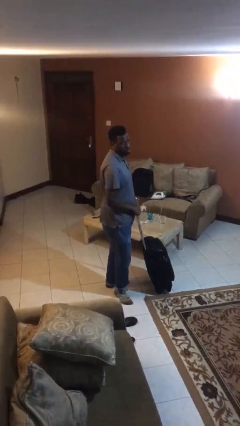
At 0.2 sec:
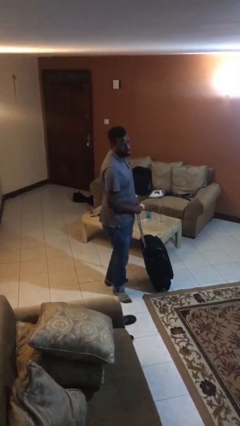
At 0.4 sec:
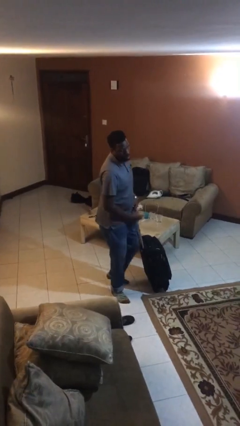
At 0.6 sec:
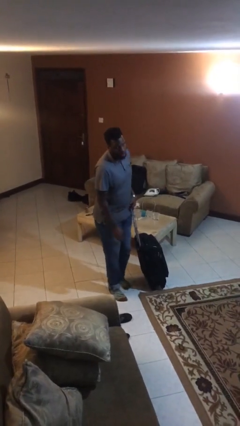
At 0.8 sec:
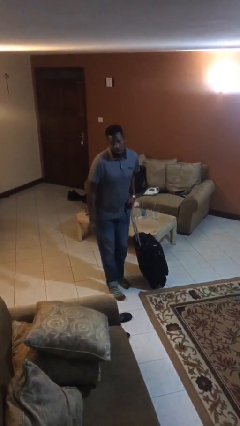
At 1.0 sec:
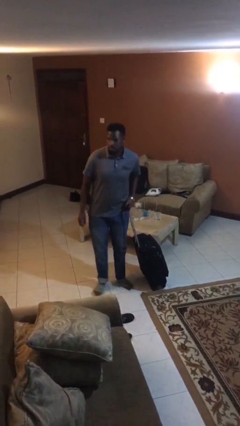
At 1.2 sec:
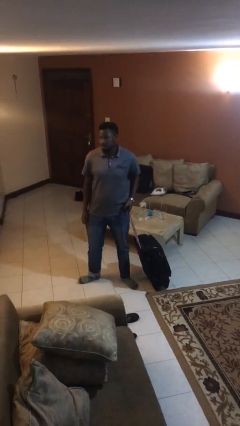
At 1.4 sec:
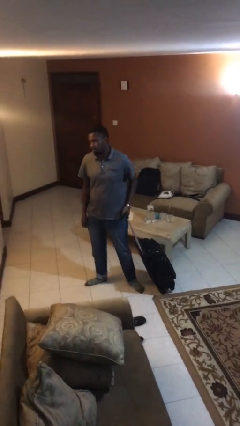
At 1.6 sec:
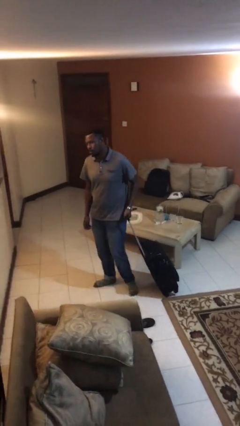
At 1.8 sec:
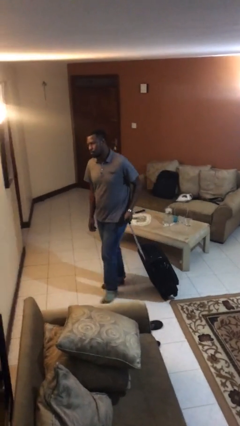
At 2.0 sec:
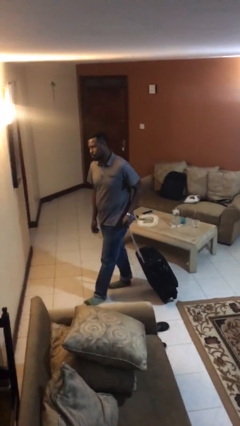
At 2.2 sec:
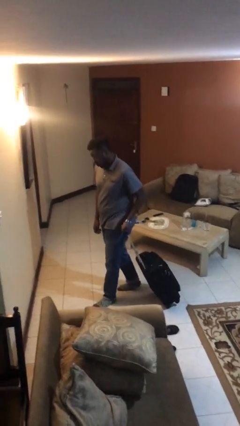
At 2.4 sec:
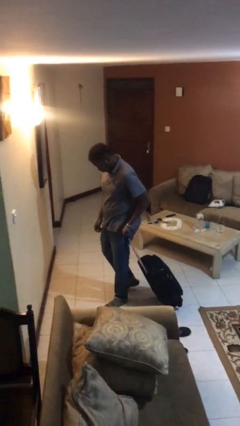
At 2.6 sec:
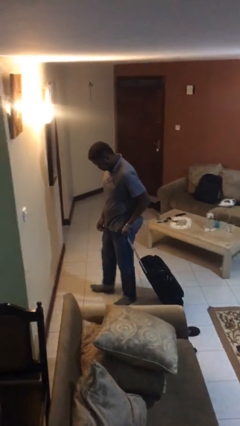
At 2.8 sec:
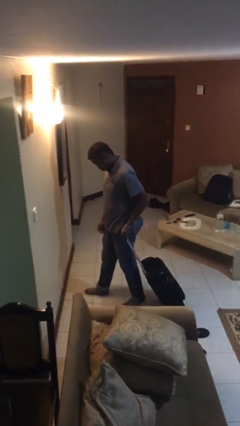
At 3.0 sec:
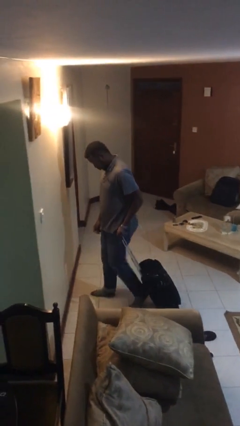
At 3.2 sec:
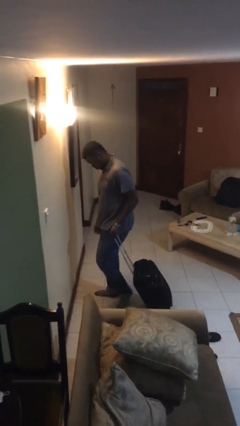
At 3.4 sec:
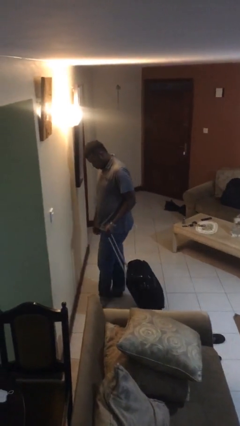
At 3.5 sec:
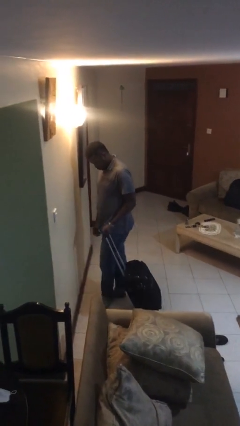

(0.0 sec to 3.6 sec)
person pulls wheeled cart

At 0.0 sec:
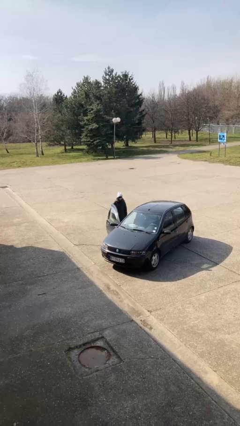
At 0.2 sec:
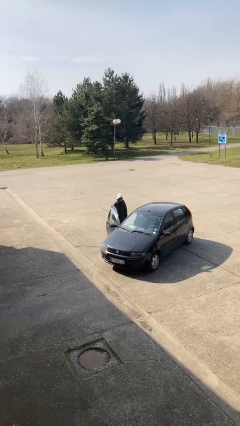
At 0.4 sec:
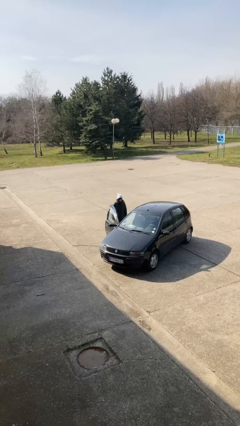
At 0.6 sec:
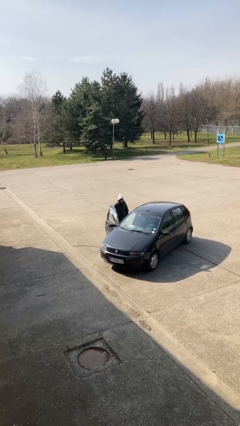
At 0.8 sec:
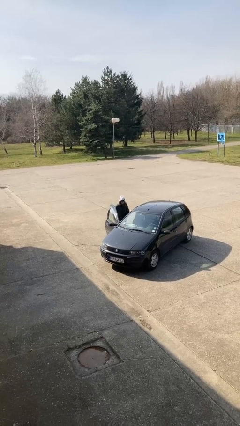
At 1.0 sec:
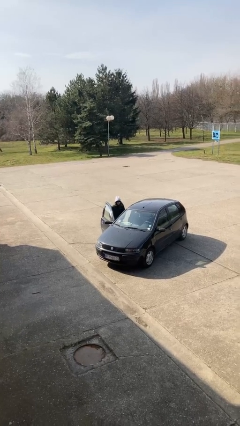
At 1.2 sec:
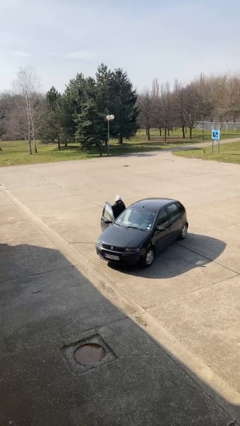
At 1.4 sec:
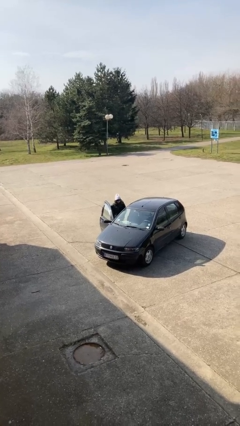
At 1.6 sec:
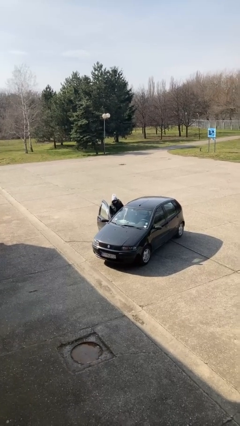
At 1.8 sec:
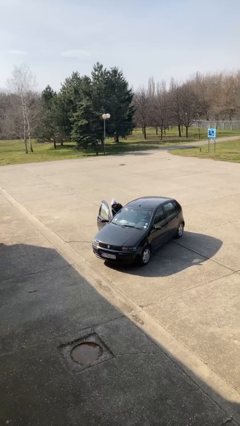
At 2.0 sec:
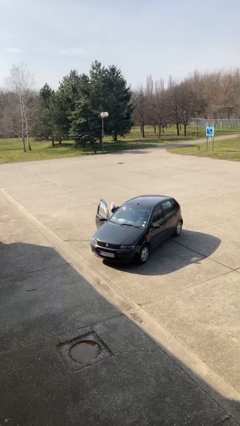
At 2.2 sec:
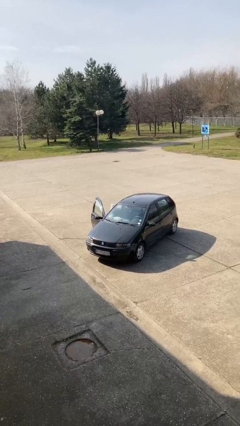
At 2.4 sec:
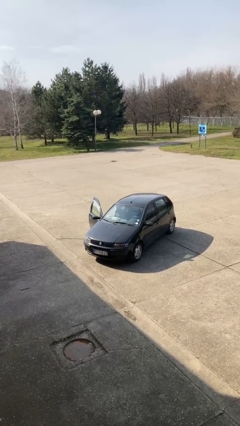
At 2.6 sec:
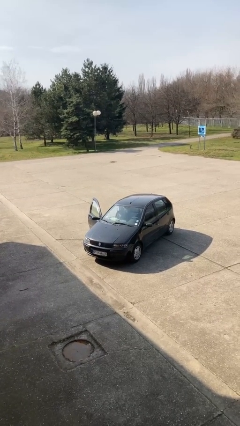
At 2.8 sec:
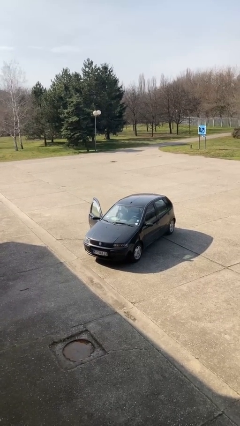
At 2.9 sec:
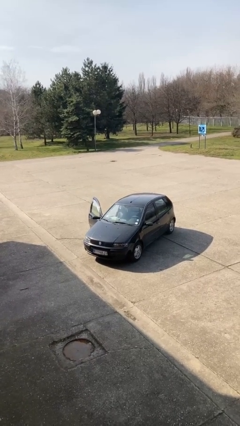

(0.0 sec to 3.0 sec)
person enters car

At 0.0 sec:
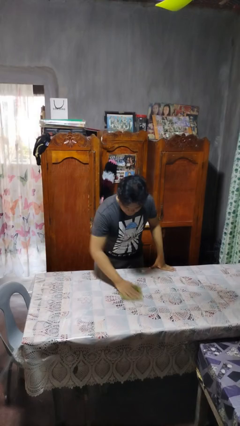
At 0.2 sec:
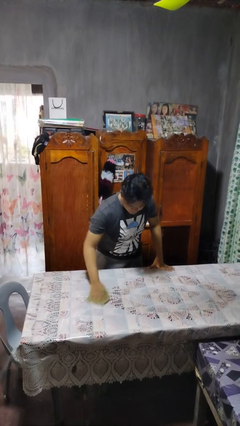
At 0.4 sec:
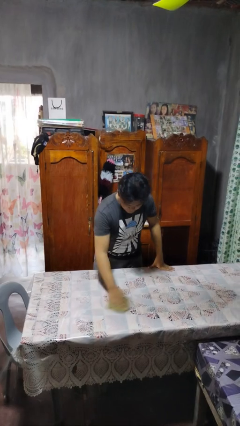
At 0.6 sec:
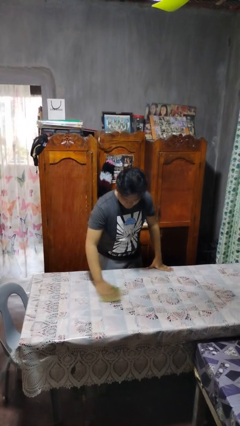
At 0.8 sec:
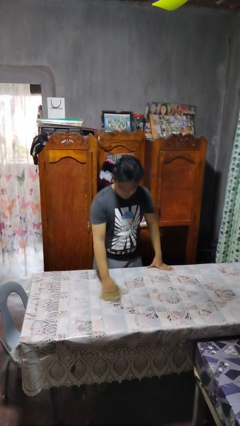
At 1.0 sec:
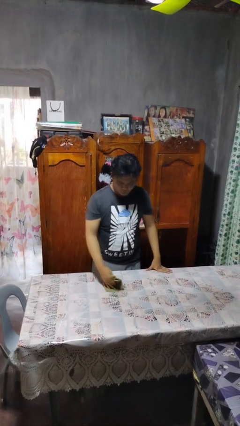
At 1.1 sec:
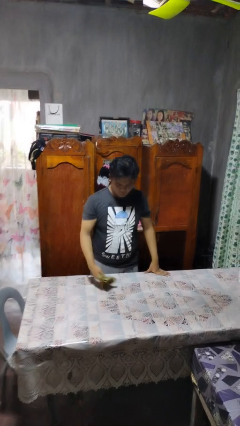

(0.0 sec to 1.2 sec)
person cleans table with rag

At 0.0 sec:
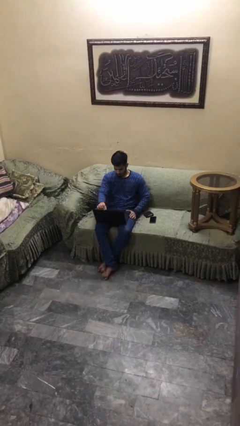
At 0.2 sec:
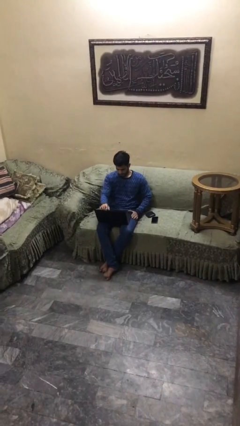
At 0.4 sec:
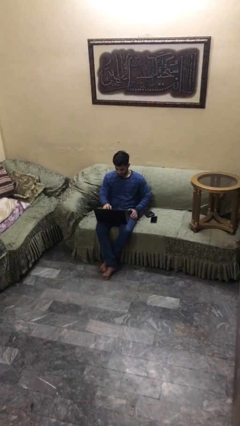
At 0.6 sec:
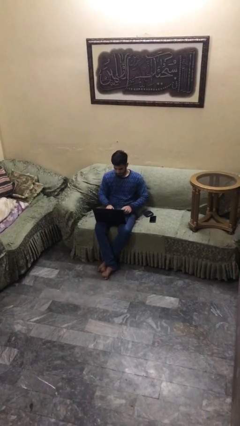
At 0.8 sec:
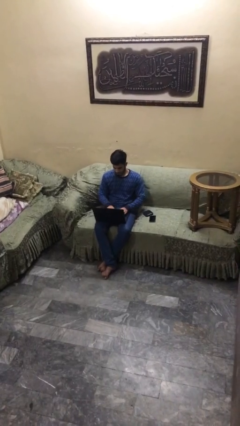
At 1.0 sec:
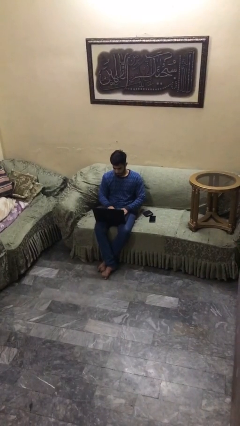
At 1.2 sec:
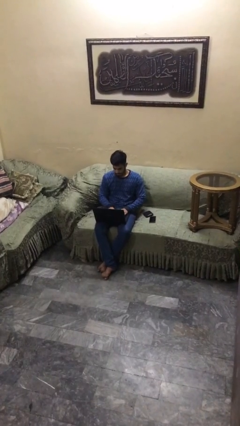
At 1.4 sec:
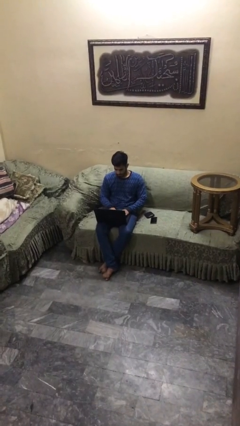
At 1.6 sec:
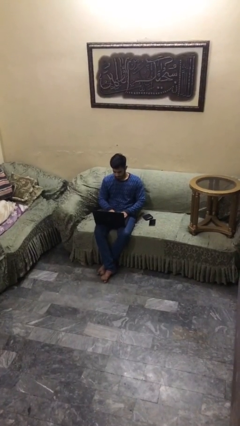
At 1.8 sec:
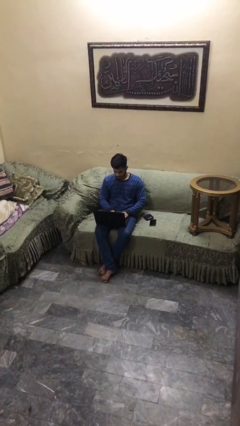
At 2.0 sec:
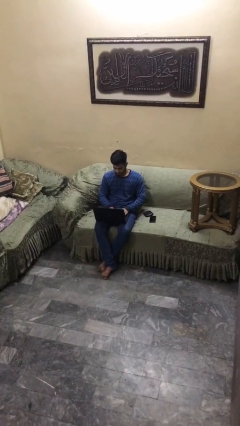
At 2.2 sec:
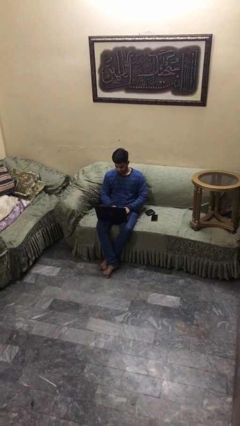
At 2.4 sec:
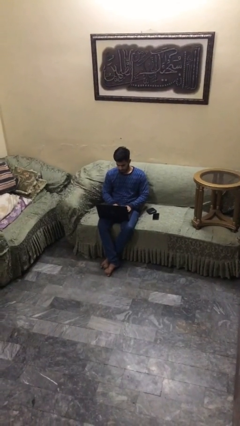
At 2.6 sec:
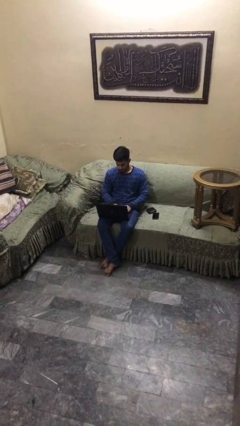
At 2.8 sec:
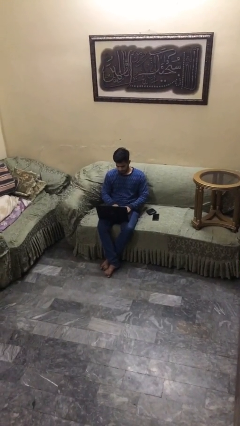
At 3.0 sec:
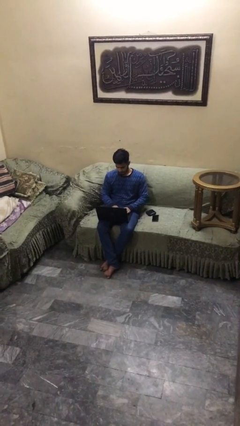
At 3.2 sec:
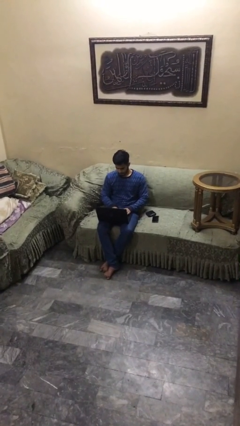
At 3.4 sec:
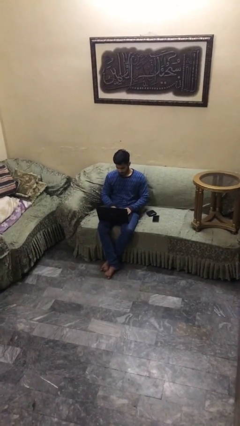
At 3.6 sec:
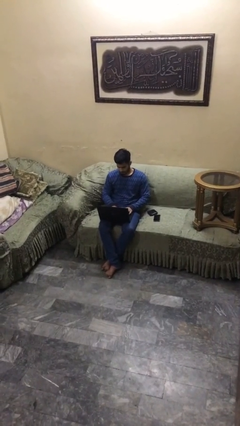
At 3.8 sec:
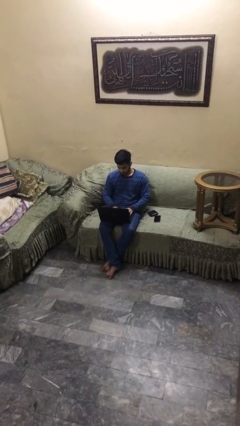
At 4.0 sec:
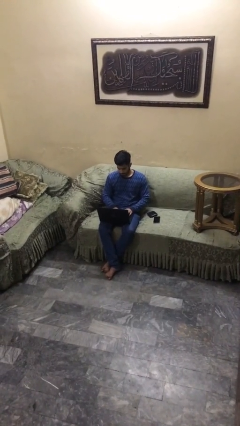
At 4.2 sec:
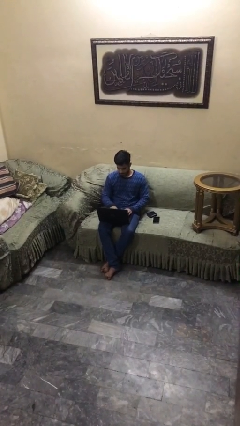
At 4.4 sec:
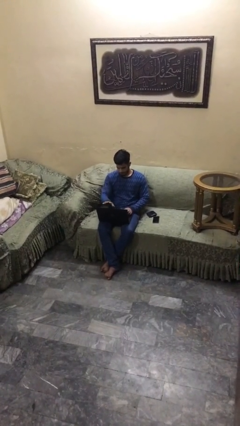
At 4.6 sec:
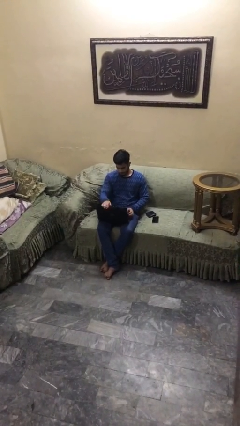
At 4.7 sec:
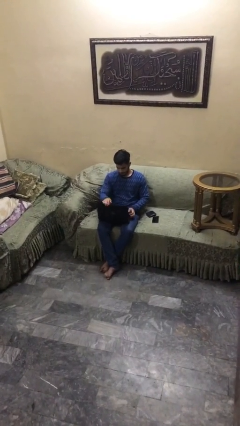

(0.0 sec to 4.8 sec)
person interacts with laptop

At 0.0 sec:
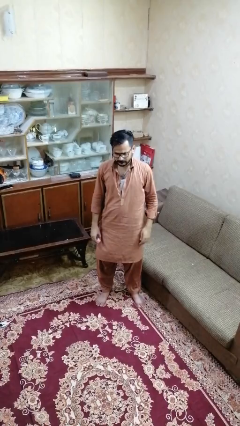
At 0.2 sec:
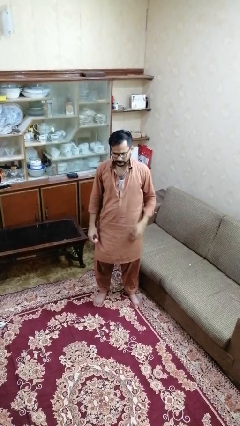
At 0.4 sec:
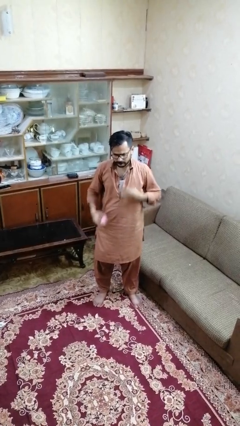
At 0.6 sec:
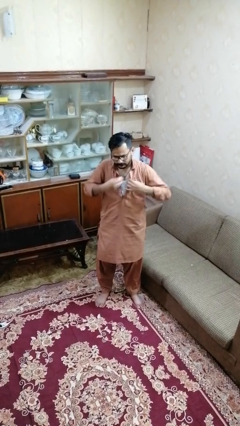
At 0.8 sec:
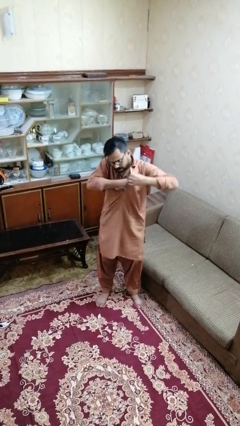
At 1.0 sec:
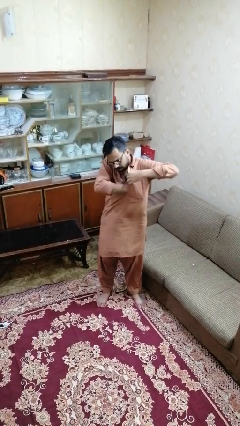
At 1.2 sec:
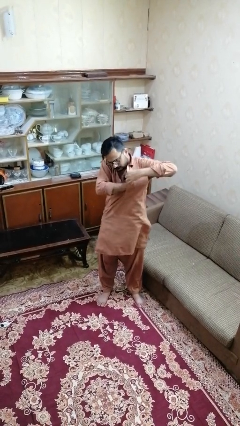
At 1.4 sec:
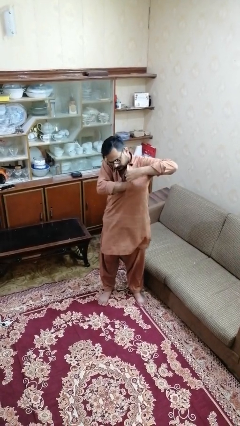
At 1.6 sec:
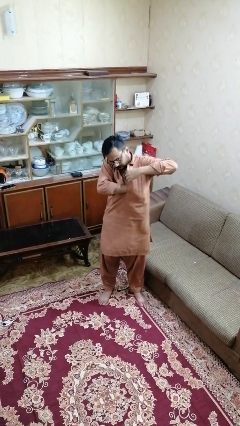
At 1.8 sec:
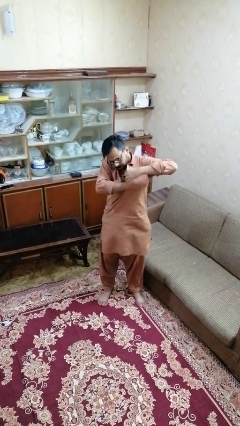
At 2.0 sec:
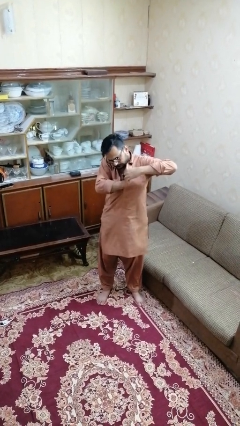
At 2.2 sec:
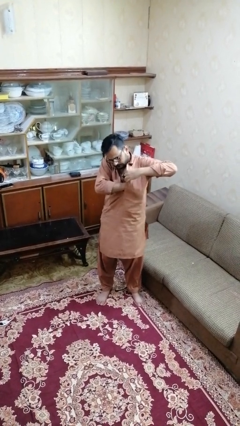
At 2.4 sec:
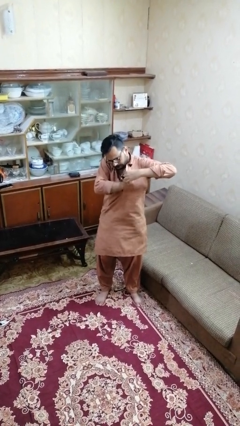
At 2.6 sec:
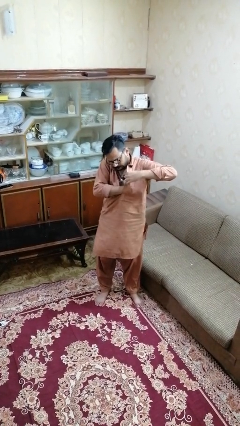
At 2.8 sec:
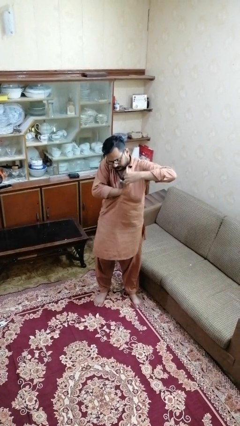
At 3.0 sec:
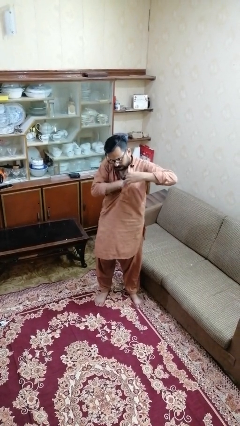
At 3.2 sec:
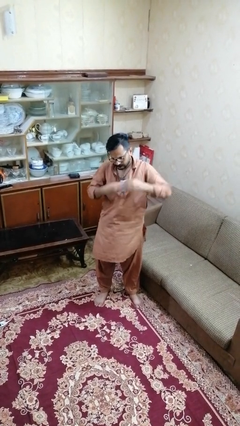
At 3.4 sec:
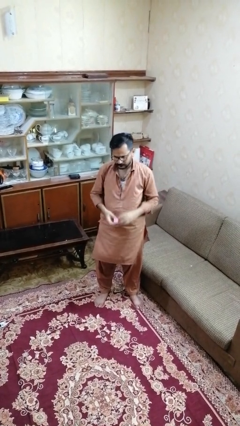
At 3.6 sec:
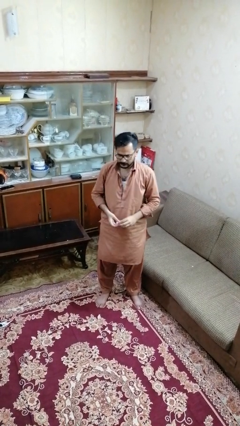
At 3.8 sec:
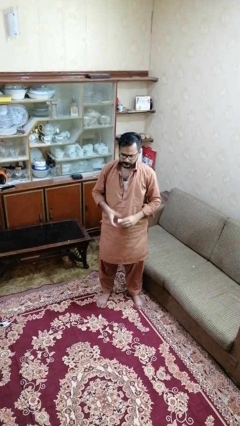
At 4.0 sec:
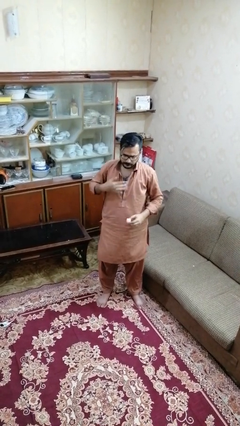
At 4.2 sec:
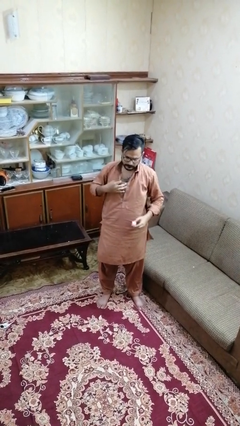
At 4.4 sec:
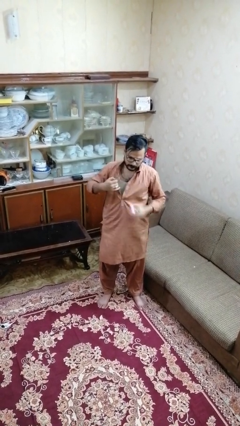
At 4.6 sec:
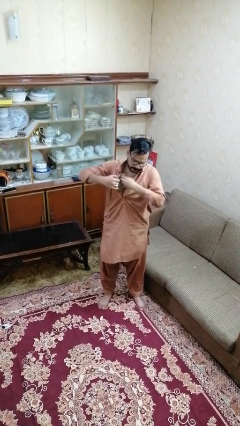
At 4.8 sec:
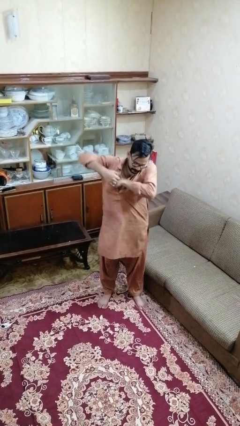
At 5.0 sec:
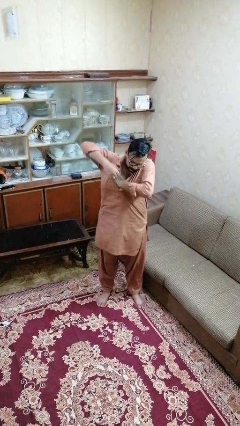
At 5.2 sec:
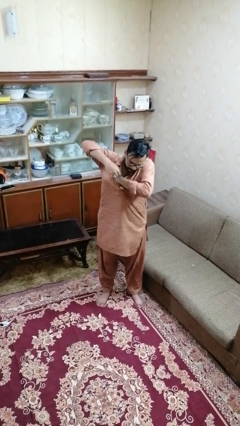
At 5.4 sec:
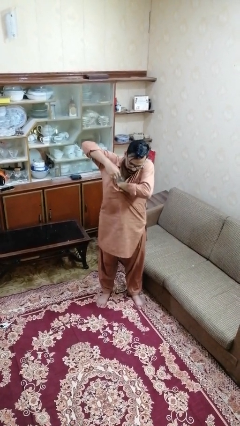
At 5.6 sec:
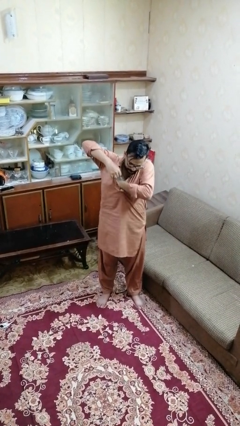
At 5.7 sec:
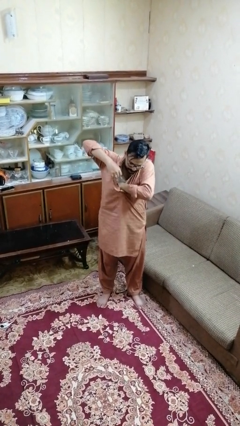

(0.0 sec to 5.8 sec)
person applies deodorant
